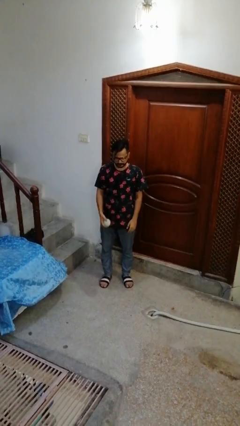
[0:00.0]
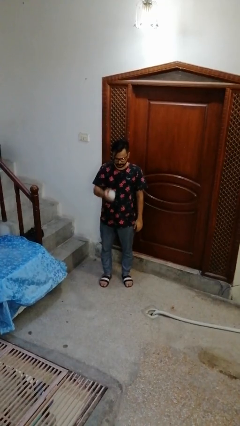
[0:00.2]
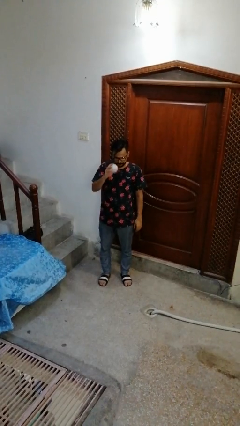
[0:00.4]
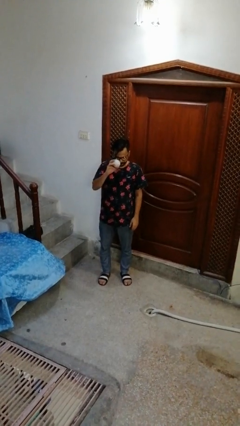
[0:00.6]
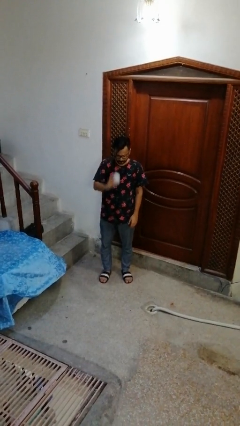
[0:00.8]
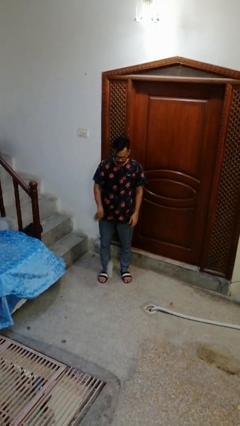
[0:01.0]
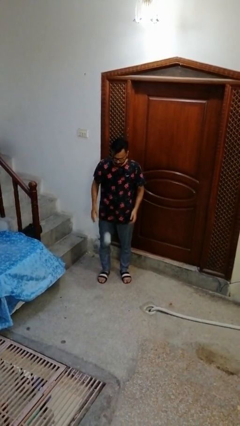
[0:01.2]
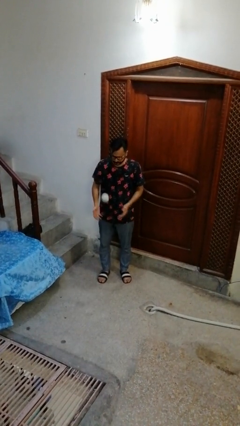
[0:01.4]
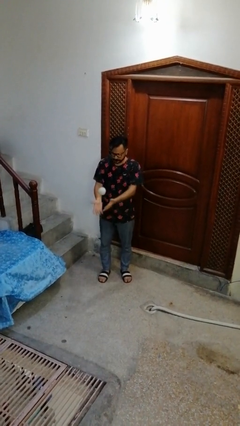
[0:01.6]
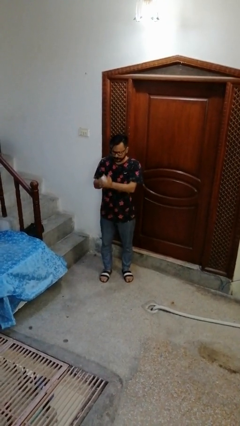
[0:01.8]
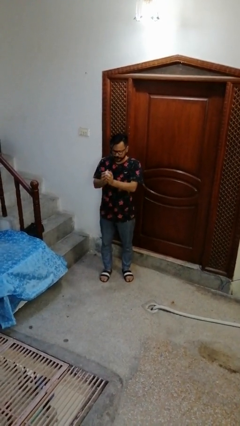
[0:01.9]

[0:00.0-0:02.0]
person bounces ball on floor

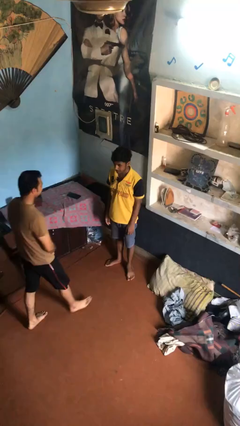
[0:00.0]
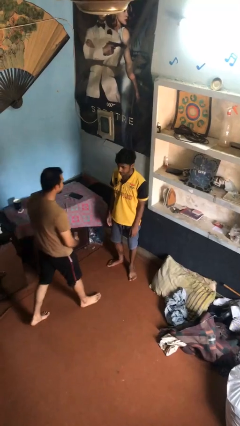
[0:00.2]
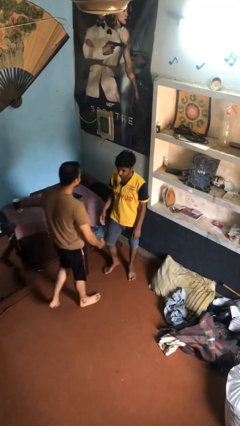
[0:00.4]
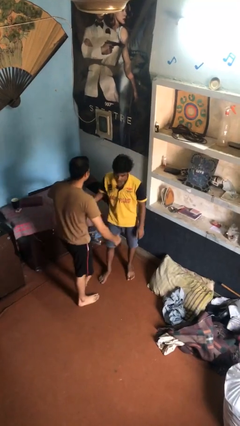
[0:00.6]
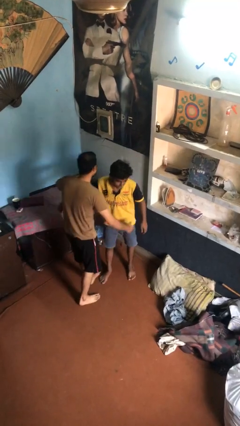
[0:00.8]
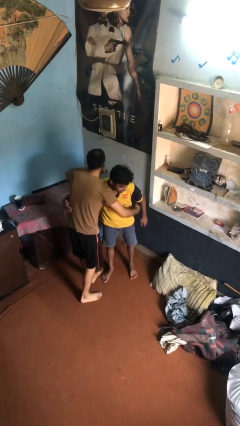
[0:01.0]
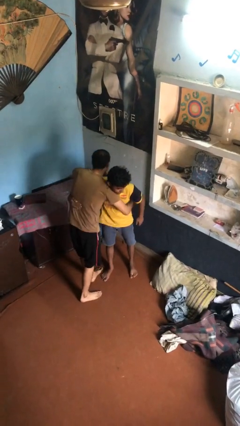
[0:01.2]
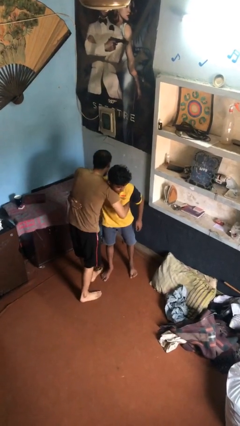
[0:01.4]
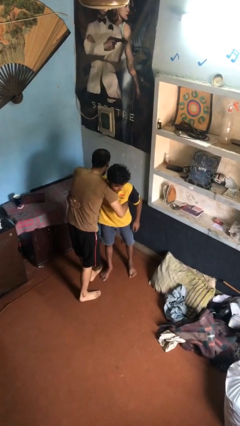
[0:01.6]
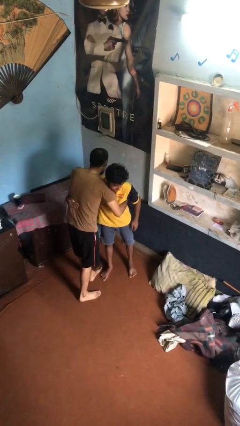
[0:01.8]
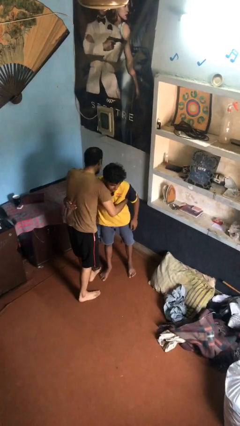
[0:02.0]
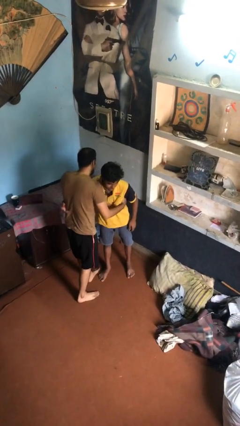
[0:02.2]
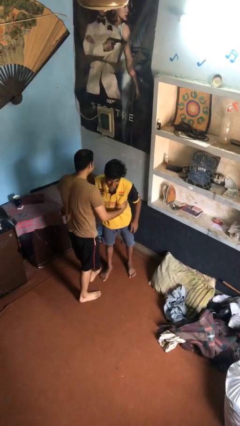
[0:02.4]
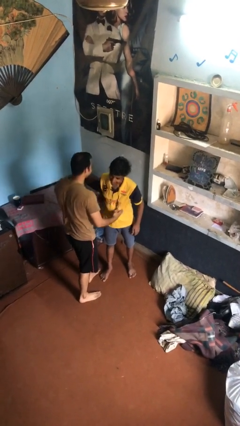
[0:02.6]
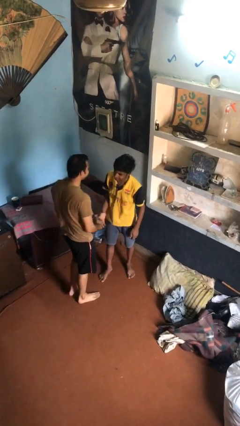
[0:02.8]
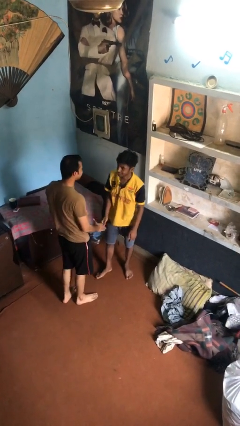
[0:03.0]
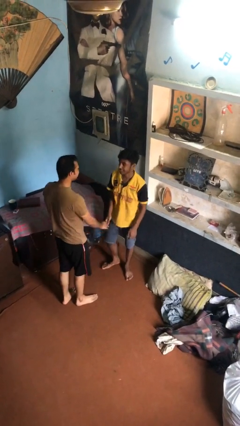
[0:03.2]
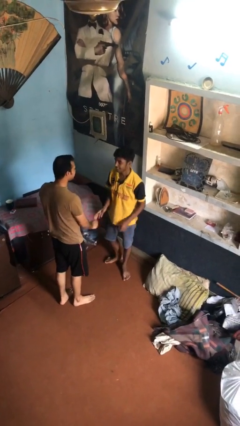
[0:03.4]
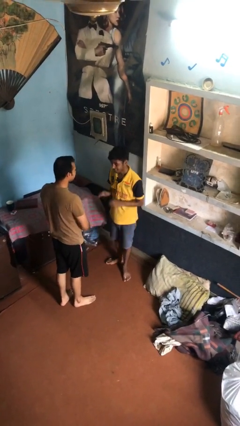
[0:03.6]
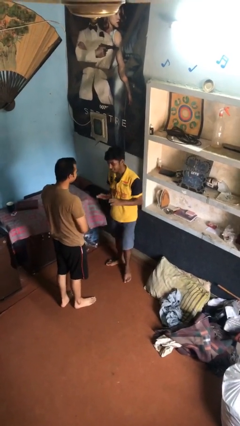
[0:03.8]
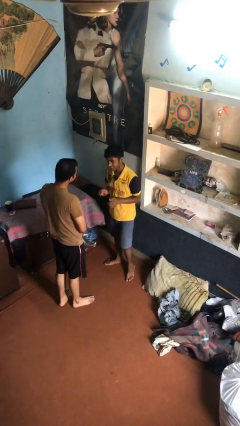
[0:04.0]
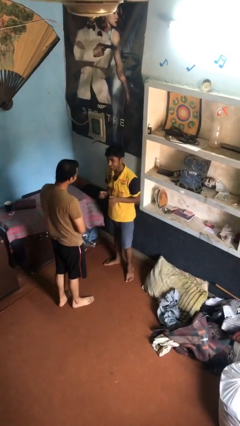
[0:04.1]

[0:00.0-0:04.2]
person embraces person

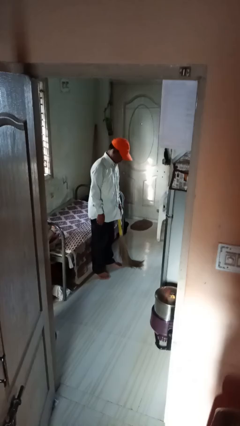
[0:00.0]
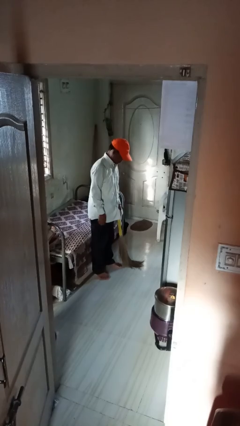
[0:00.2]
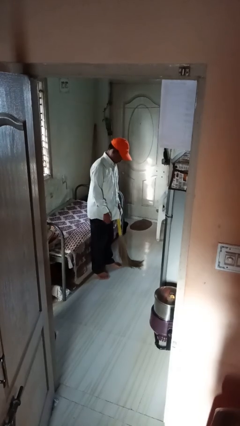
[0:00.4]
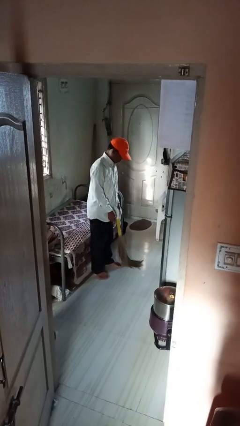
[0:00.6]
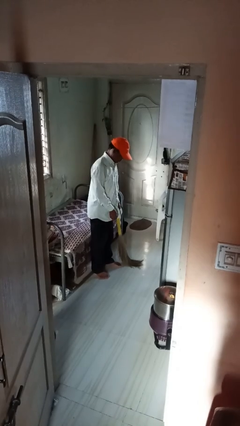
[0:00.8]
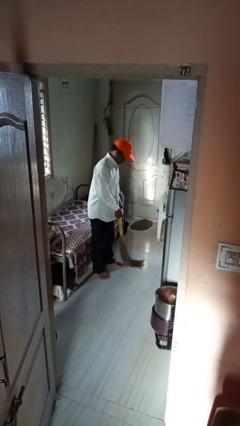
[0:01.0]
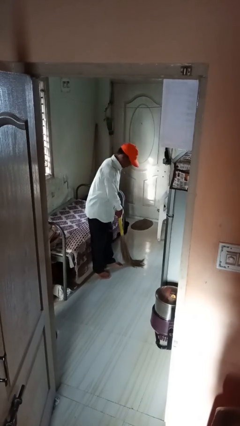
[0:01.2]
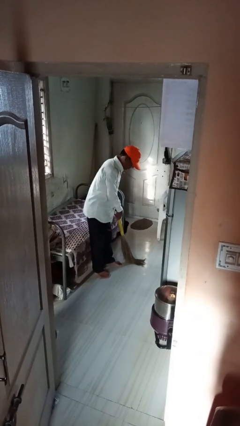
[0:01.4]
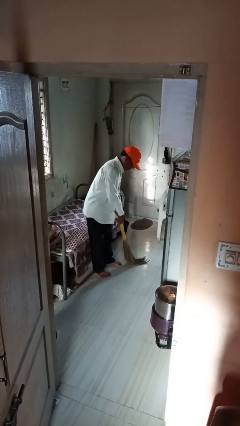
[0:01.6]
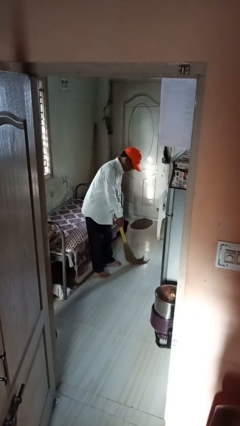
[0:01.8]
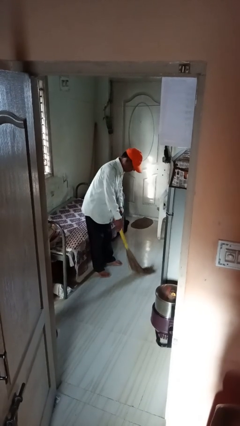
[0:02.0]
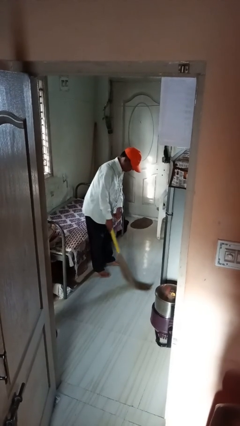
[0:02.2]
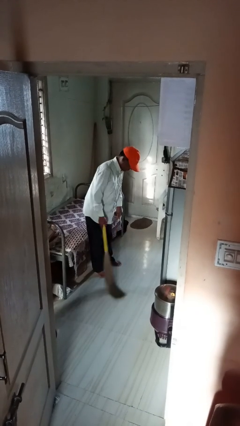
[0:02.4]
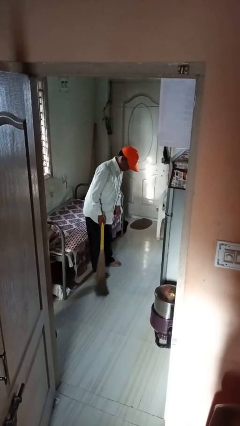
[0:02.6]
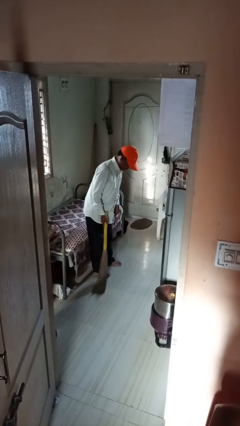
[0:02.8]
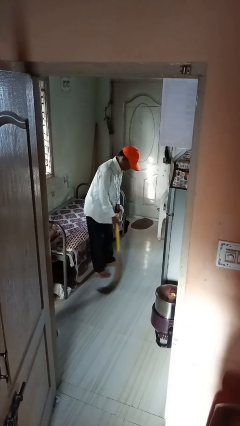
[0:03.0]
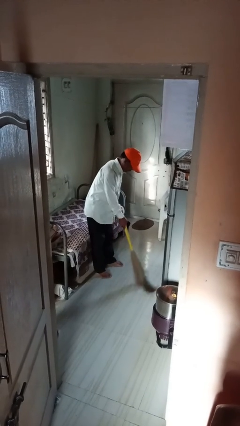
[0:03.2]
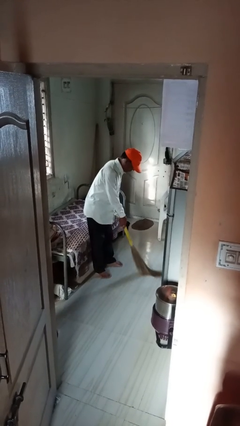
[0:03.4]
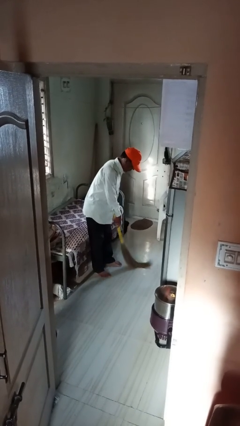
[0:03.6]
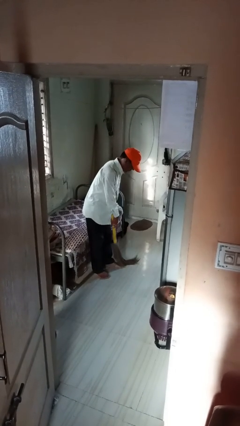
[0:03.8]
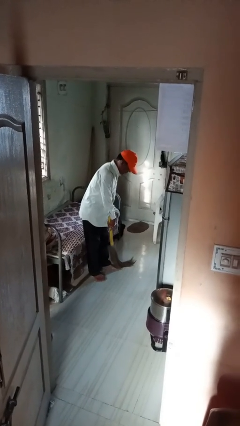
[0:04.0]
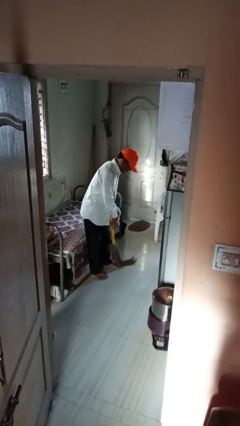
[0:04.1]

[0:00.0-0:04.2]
person sweeps floor

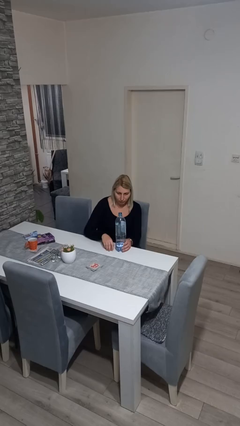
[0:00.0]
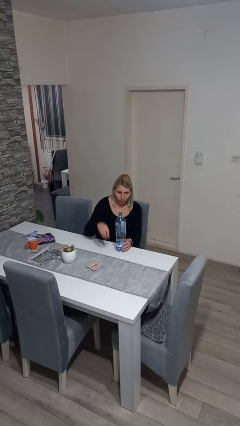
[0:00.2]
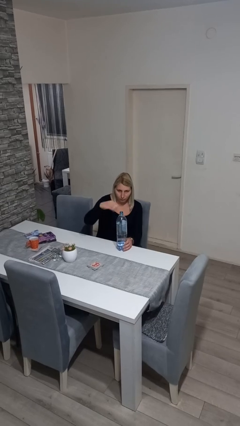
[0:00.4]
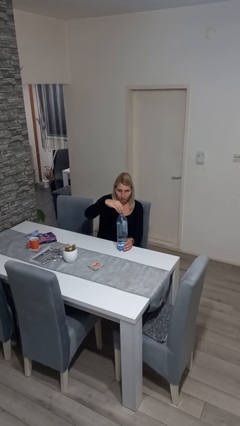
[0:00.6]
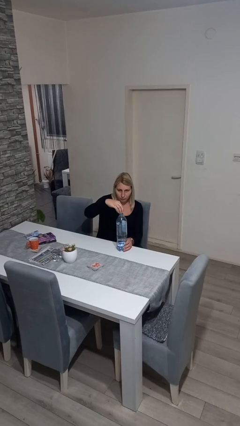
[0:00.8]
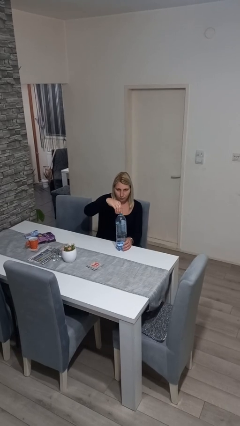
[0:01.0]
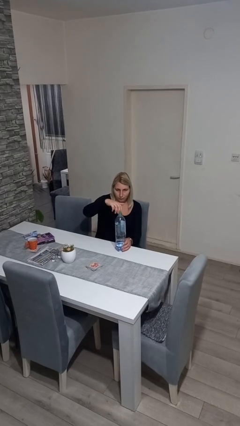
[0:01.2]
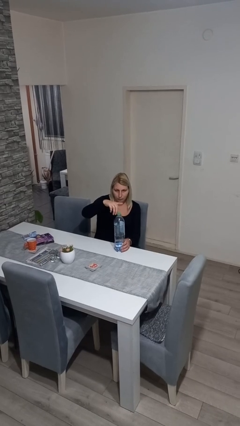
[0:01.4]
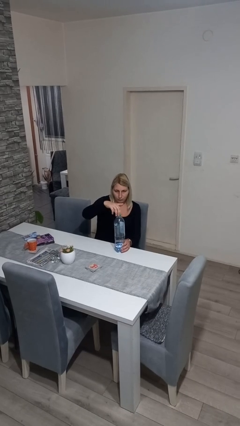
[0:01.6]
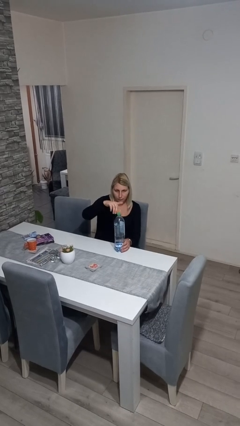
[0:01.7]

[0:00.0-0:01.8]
person screws lid to bottle

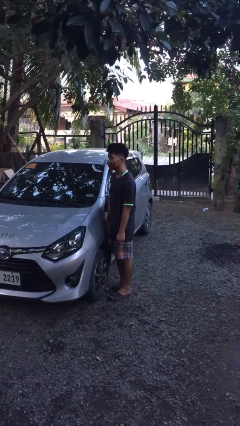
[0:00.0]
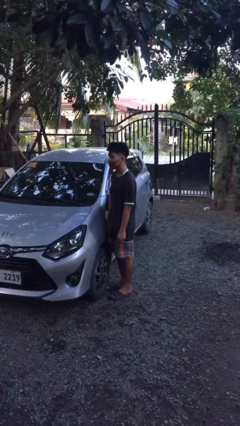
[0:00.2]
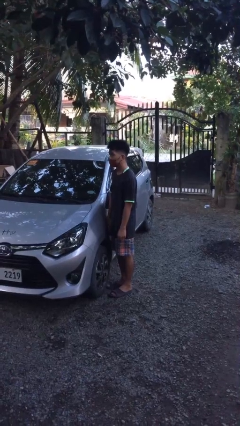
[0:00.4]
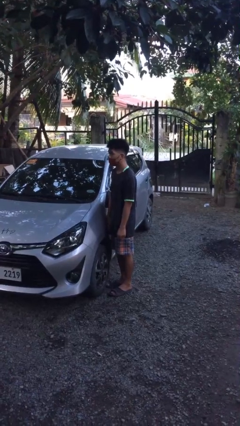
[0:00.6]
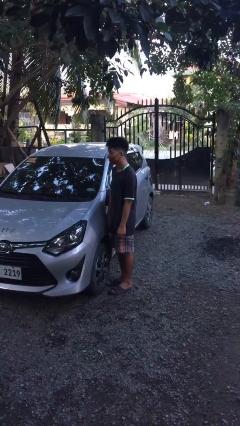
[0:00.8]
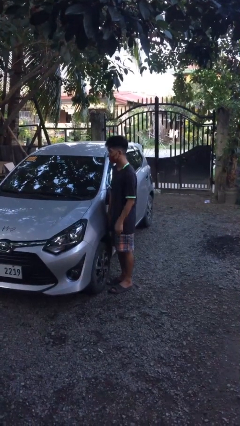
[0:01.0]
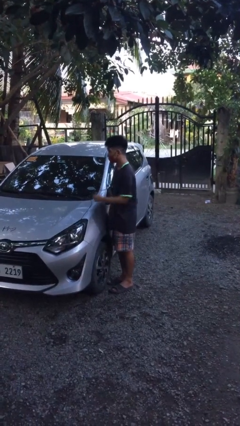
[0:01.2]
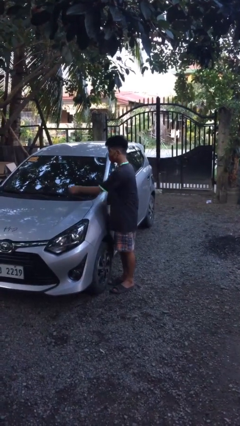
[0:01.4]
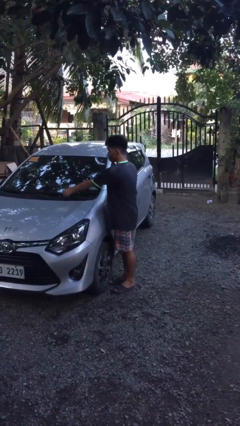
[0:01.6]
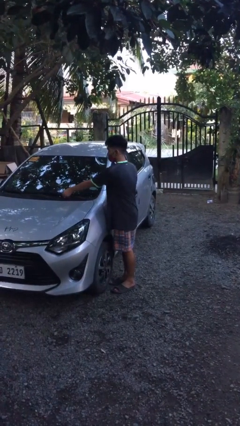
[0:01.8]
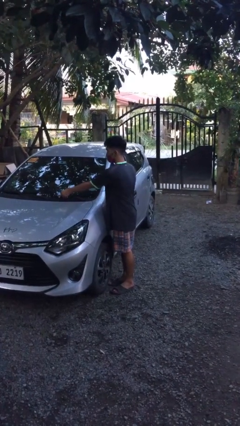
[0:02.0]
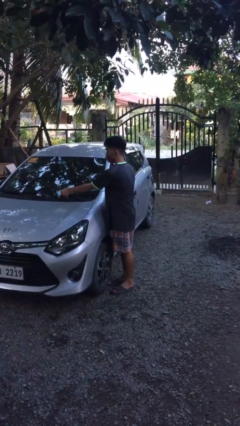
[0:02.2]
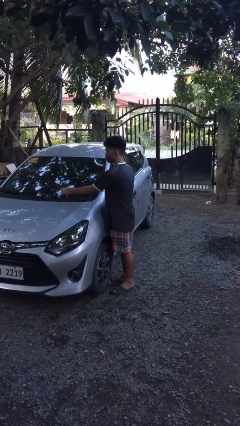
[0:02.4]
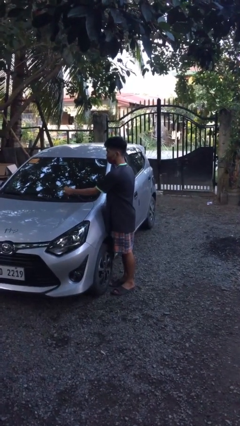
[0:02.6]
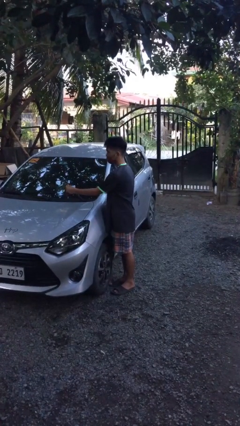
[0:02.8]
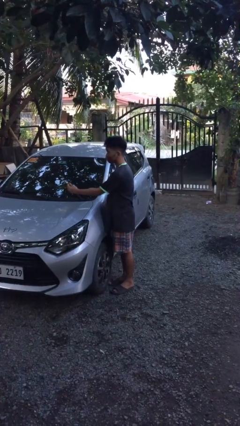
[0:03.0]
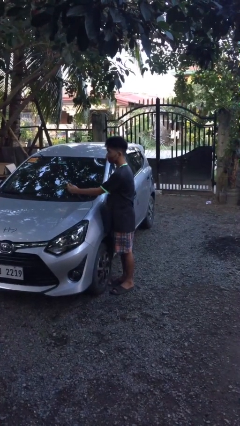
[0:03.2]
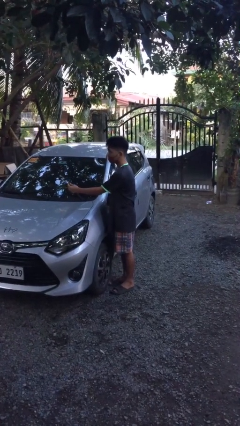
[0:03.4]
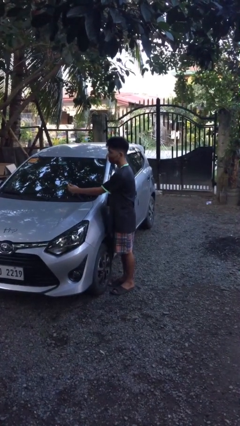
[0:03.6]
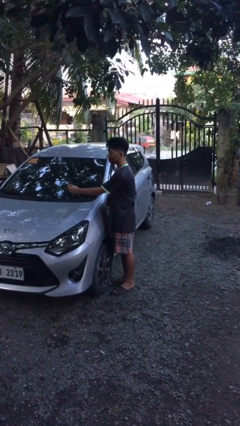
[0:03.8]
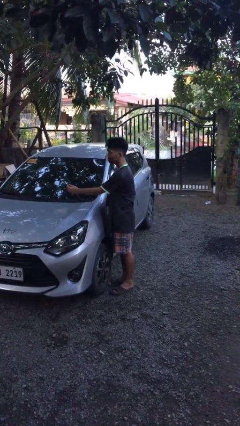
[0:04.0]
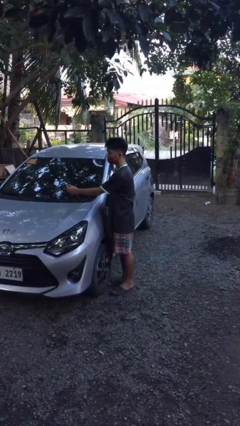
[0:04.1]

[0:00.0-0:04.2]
person flips up car wipers

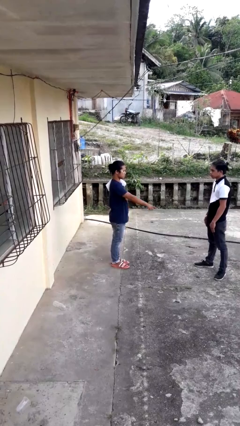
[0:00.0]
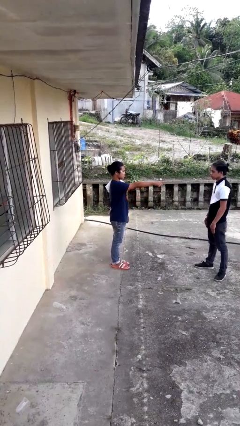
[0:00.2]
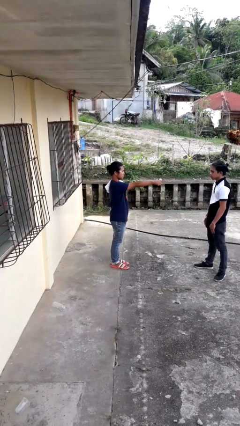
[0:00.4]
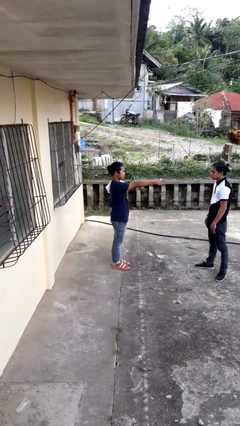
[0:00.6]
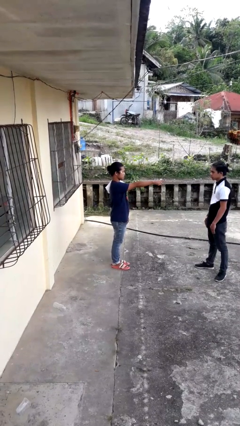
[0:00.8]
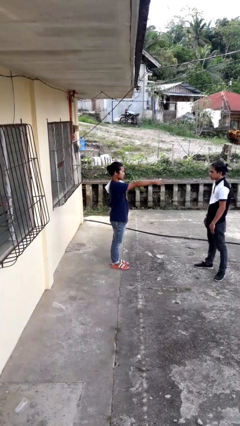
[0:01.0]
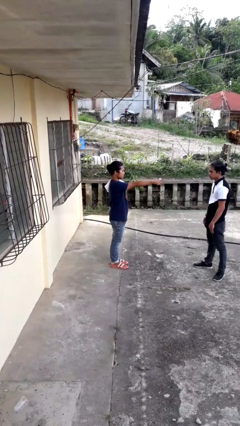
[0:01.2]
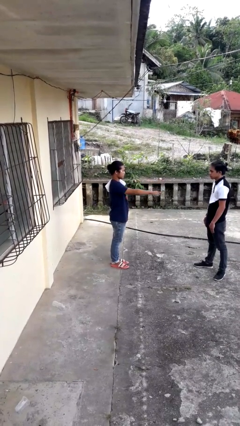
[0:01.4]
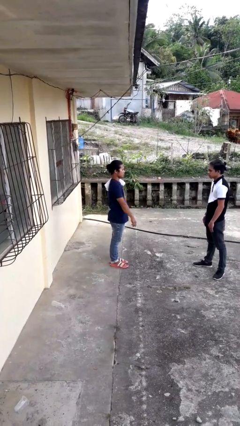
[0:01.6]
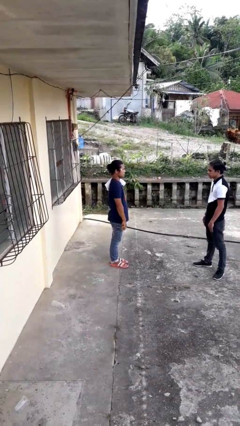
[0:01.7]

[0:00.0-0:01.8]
person points at person
